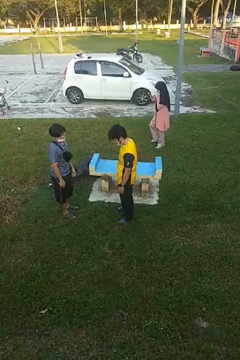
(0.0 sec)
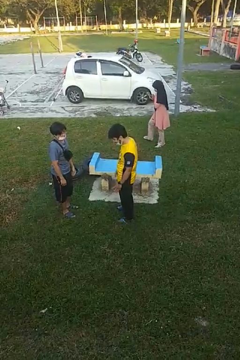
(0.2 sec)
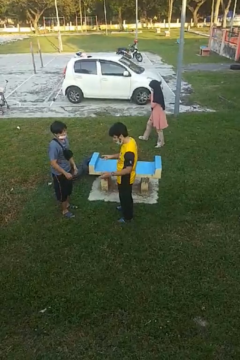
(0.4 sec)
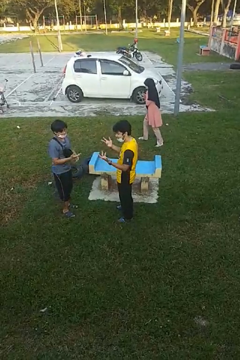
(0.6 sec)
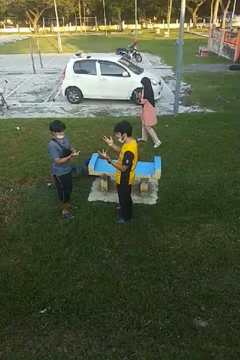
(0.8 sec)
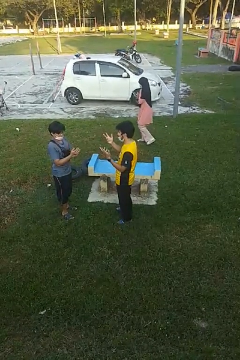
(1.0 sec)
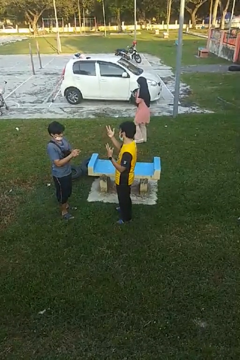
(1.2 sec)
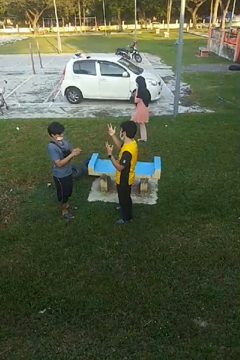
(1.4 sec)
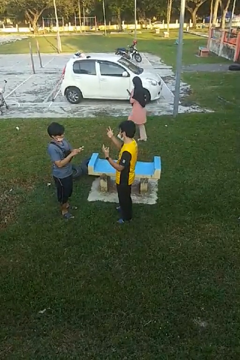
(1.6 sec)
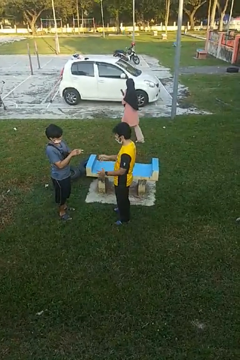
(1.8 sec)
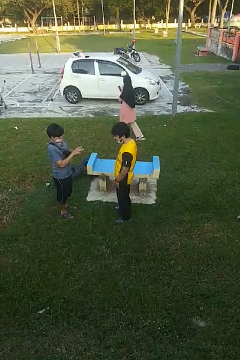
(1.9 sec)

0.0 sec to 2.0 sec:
person talks to person

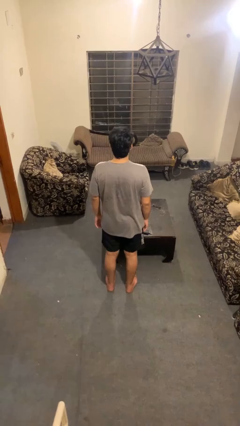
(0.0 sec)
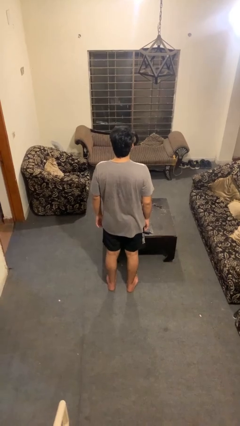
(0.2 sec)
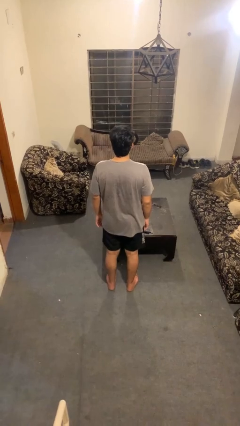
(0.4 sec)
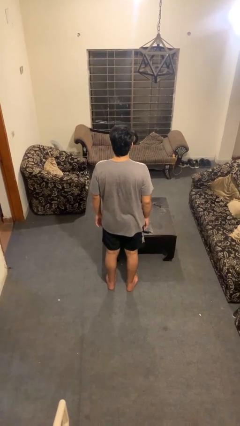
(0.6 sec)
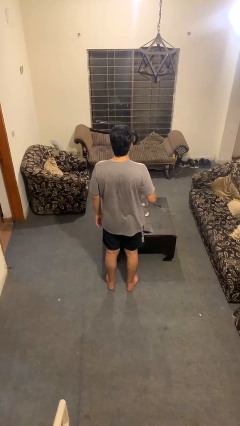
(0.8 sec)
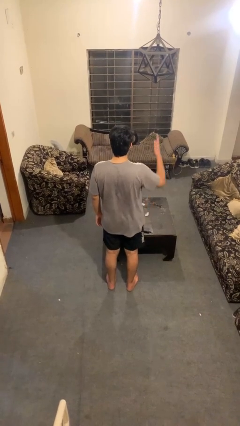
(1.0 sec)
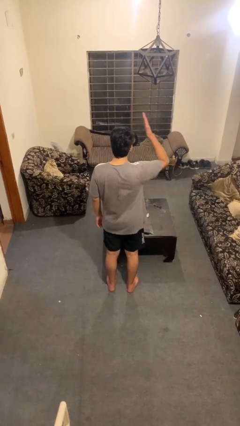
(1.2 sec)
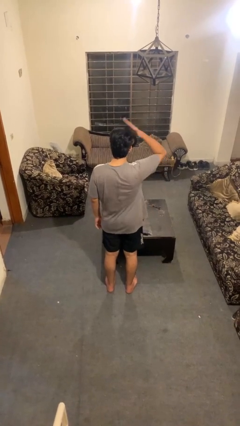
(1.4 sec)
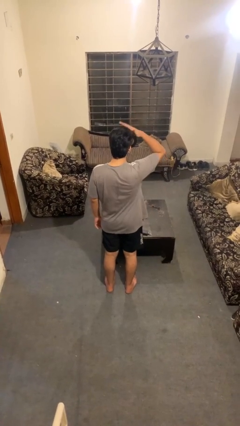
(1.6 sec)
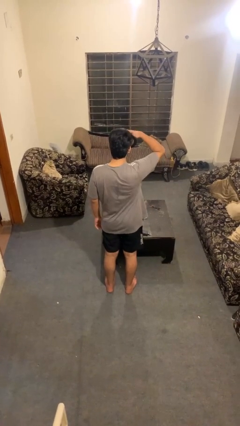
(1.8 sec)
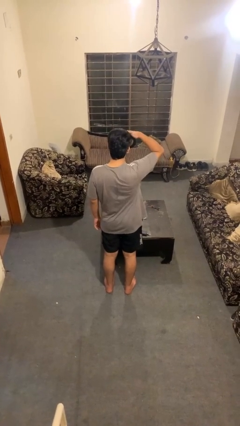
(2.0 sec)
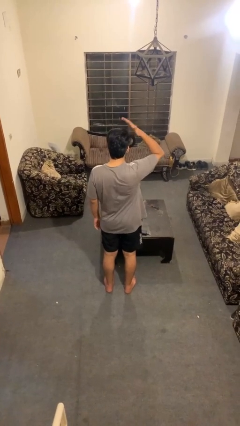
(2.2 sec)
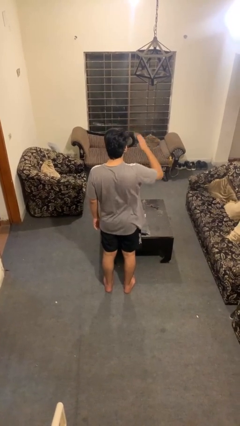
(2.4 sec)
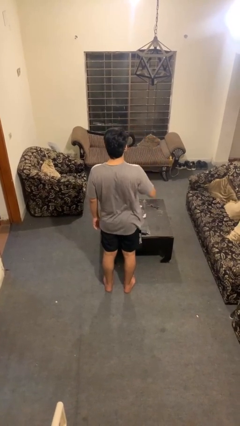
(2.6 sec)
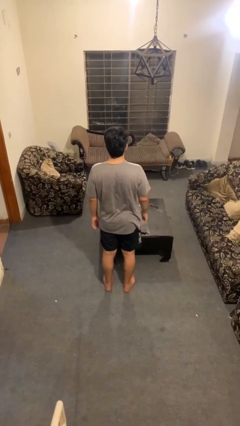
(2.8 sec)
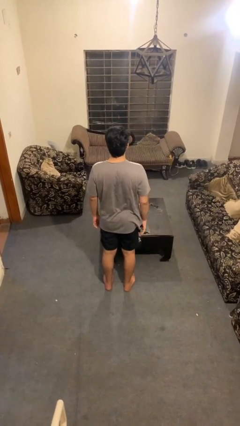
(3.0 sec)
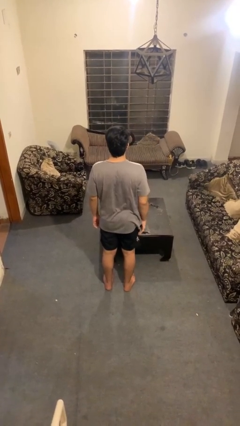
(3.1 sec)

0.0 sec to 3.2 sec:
person pats head

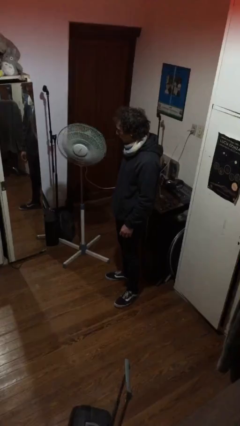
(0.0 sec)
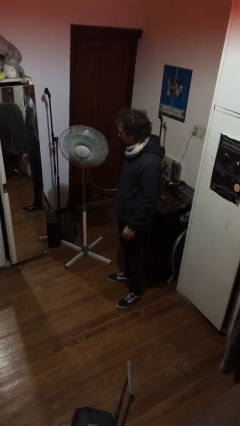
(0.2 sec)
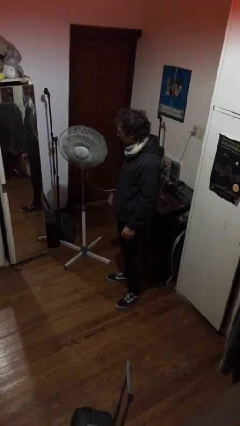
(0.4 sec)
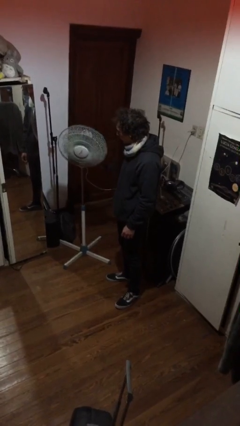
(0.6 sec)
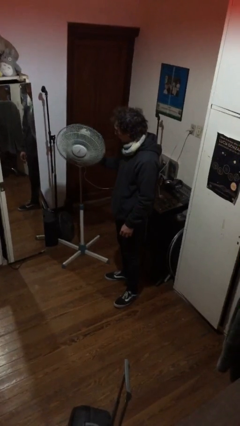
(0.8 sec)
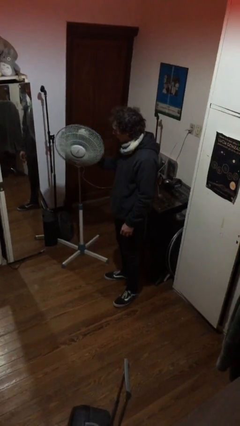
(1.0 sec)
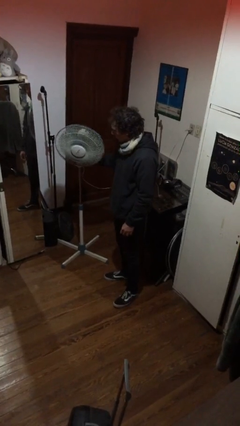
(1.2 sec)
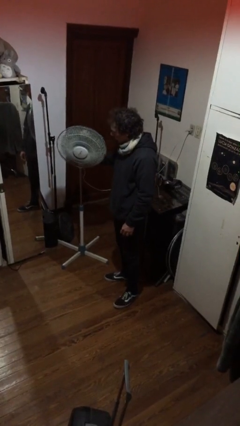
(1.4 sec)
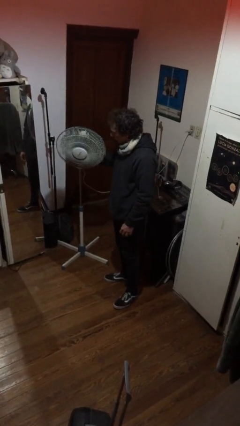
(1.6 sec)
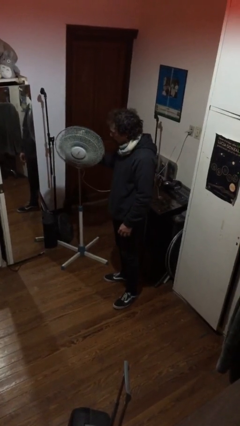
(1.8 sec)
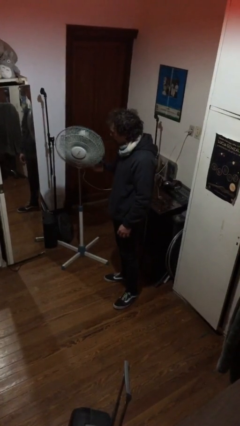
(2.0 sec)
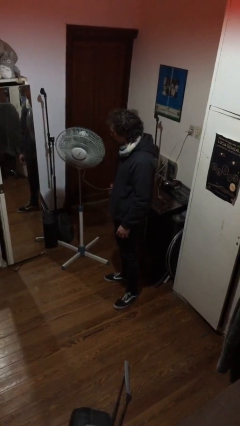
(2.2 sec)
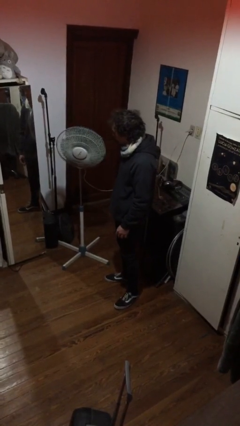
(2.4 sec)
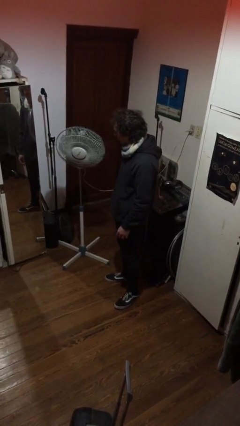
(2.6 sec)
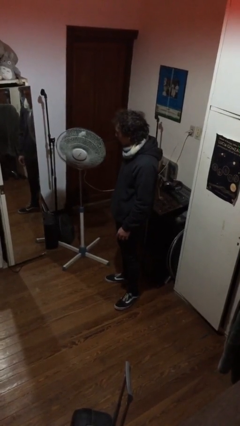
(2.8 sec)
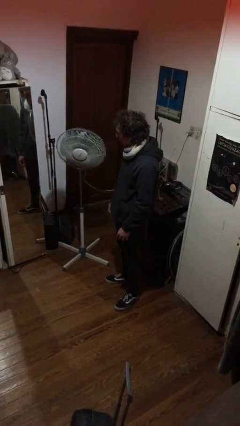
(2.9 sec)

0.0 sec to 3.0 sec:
person turns off fan

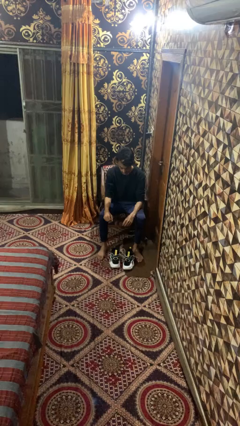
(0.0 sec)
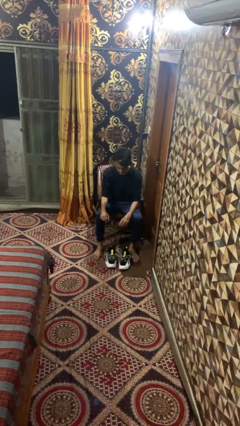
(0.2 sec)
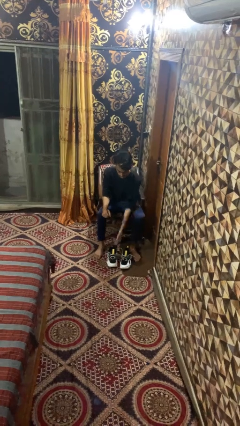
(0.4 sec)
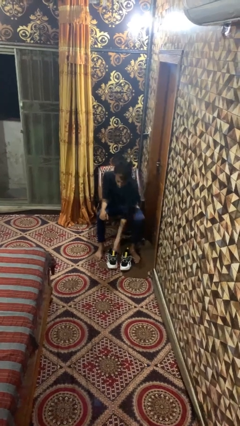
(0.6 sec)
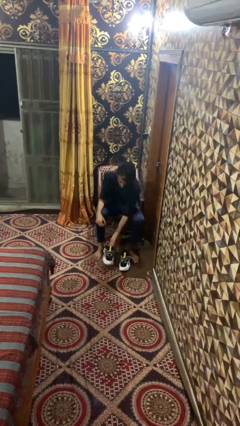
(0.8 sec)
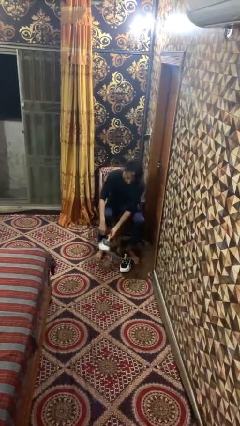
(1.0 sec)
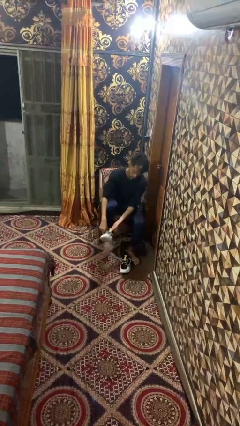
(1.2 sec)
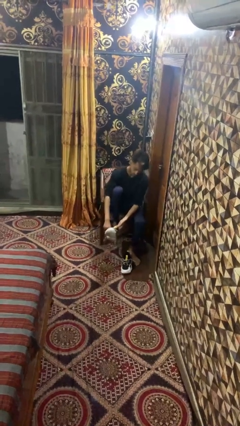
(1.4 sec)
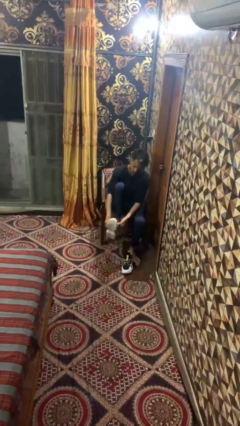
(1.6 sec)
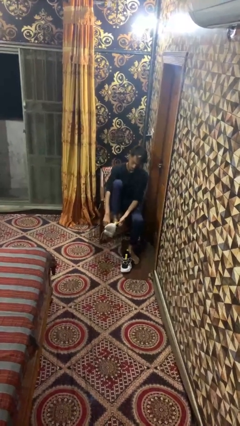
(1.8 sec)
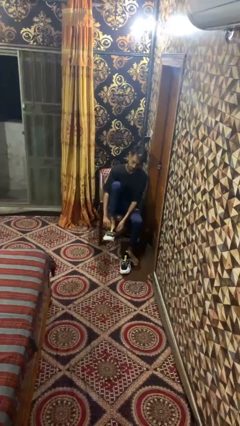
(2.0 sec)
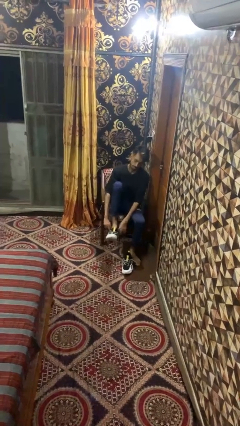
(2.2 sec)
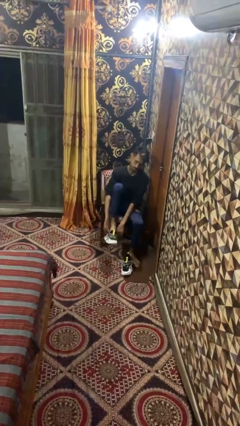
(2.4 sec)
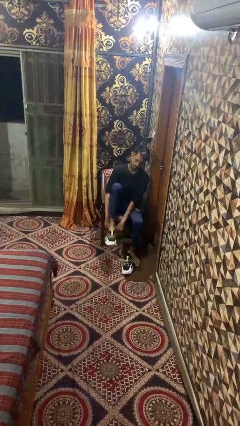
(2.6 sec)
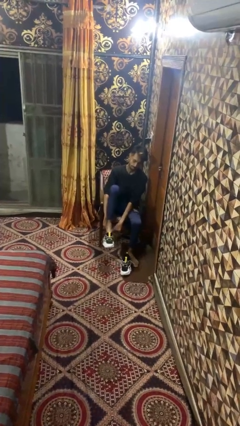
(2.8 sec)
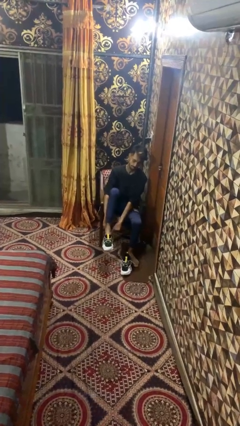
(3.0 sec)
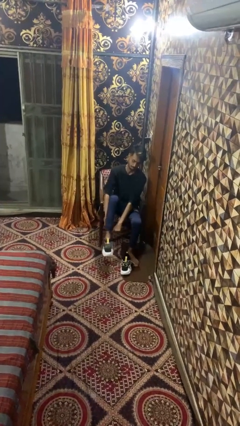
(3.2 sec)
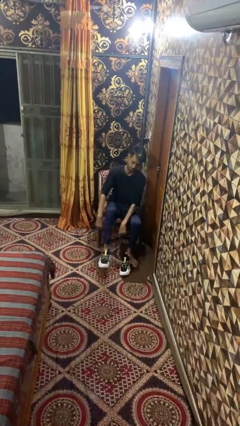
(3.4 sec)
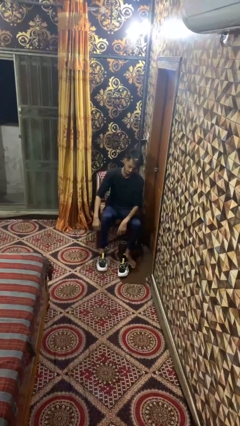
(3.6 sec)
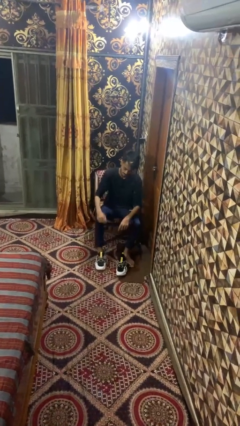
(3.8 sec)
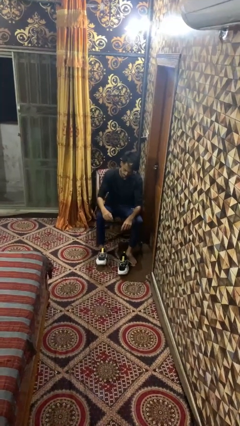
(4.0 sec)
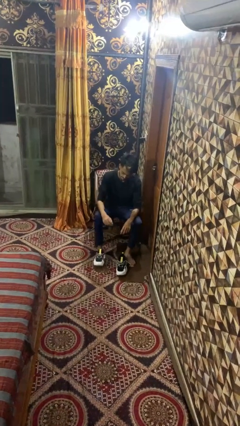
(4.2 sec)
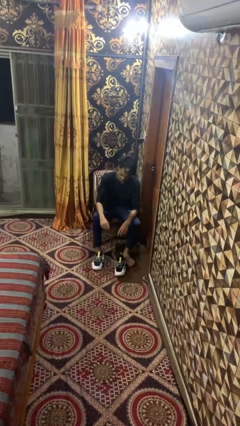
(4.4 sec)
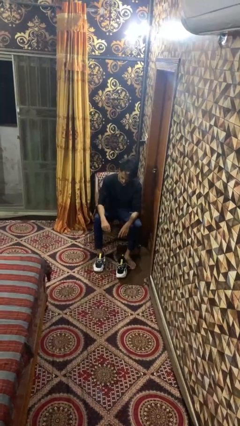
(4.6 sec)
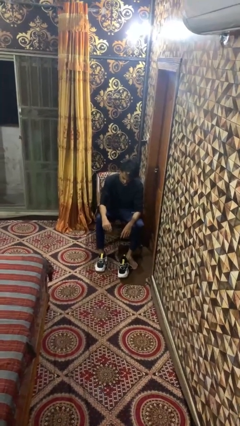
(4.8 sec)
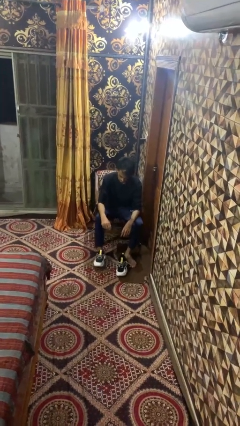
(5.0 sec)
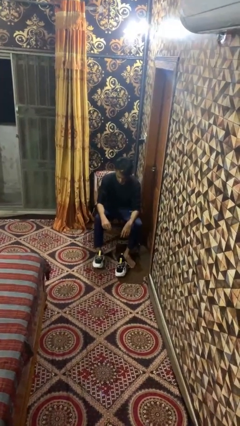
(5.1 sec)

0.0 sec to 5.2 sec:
person puts on shoes

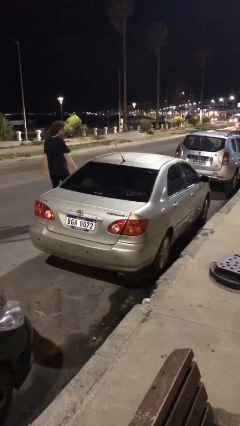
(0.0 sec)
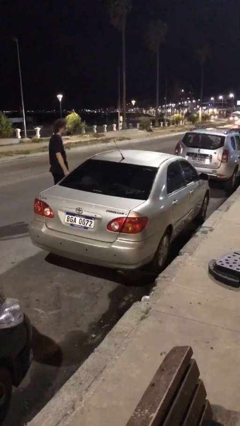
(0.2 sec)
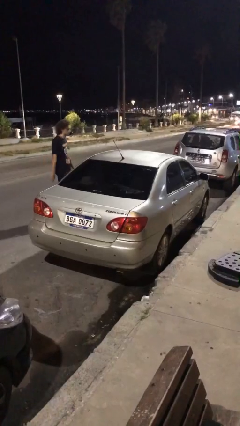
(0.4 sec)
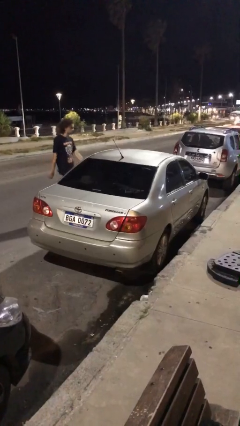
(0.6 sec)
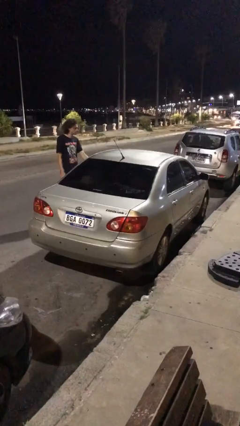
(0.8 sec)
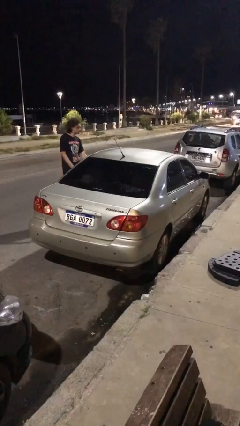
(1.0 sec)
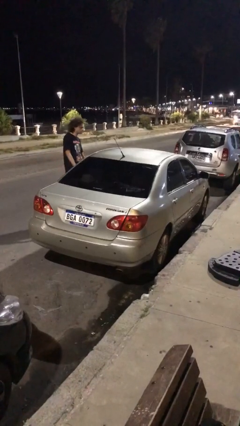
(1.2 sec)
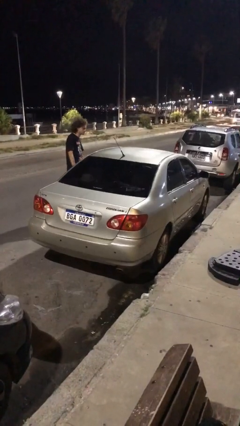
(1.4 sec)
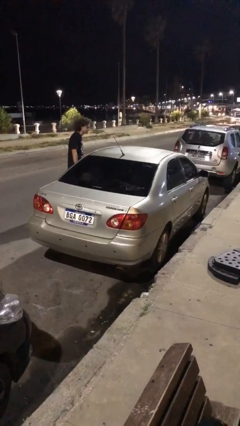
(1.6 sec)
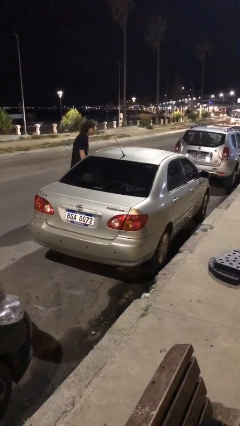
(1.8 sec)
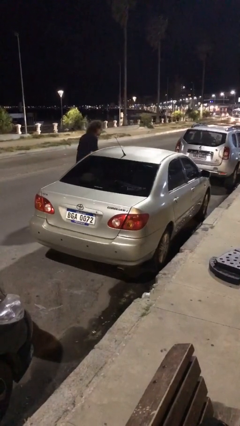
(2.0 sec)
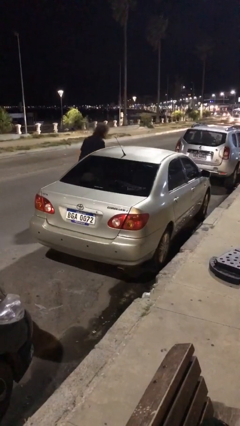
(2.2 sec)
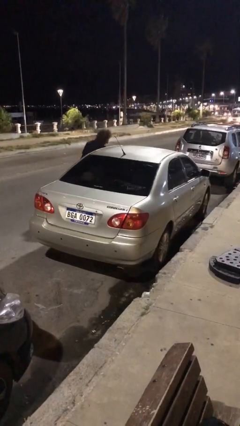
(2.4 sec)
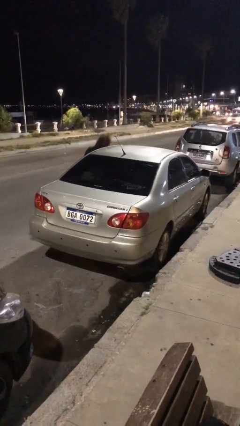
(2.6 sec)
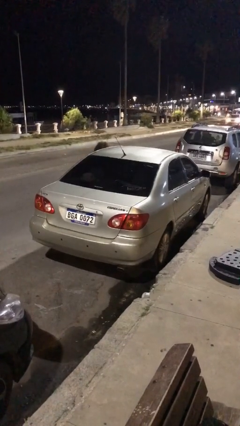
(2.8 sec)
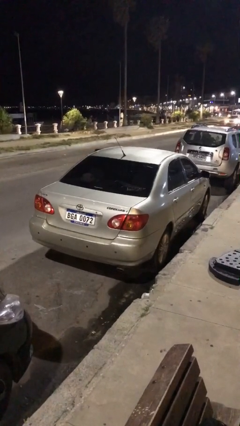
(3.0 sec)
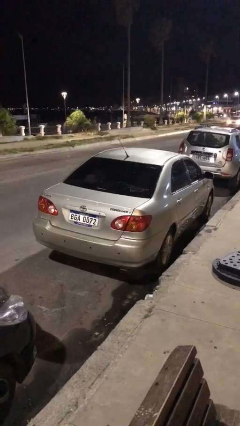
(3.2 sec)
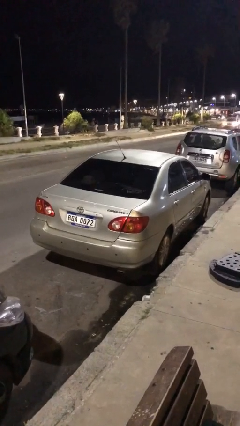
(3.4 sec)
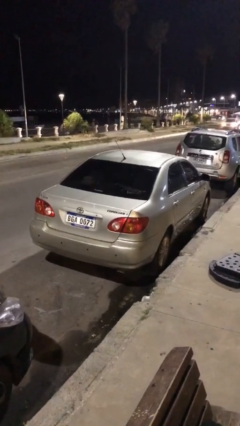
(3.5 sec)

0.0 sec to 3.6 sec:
car picks up person

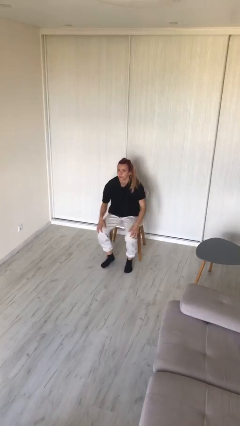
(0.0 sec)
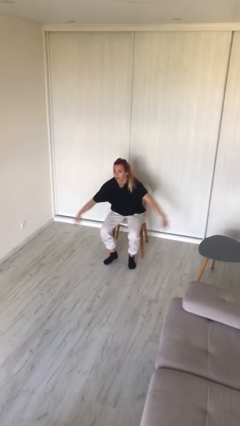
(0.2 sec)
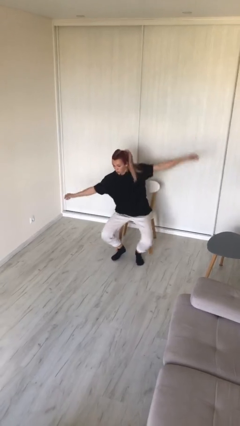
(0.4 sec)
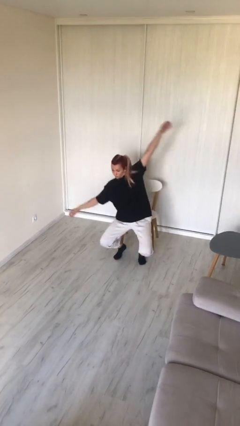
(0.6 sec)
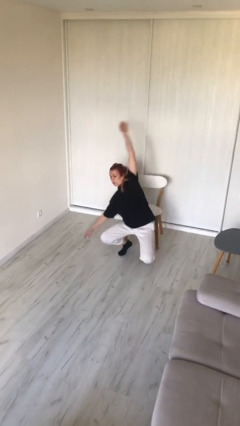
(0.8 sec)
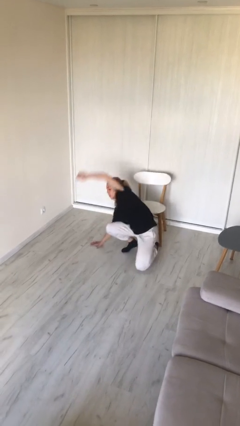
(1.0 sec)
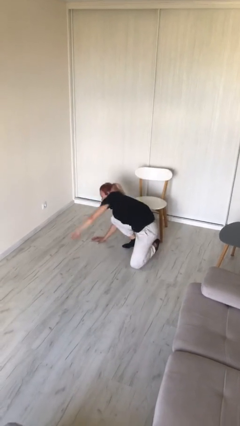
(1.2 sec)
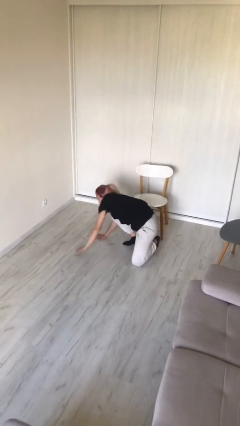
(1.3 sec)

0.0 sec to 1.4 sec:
person falls from chair
